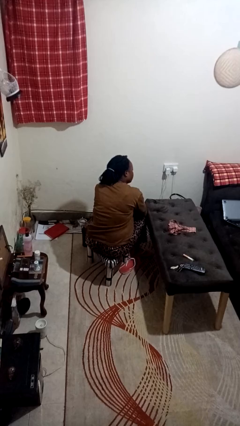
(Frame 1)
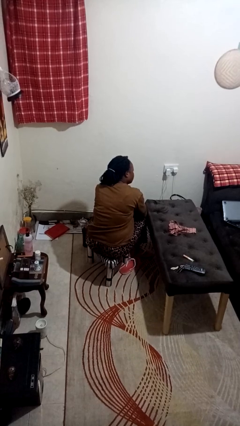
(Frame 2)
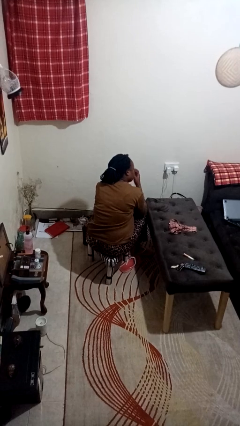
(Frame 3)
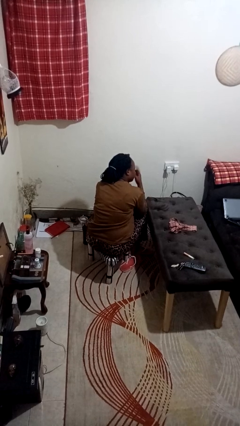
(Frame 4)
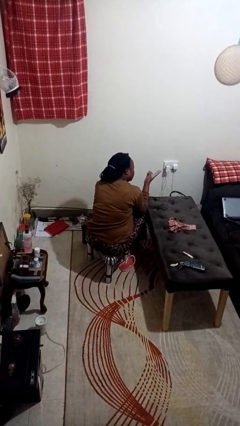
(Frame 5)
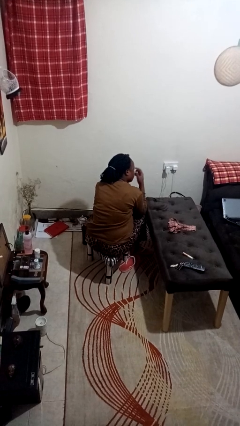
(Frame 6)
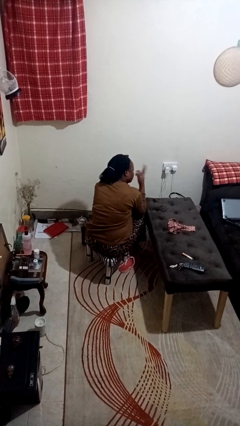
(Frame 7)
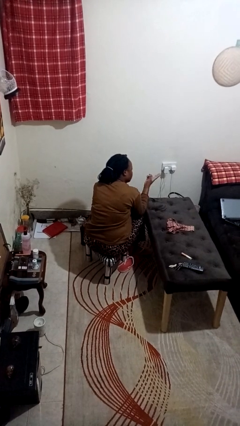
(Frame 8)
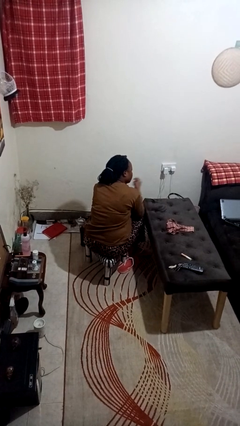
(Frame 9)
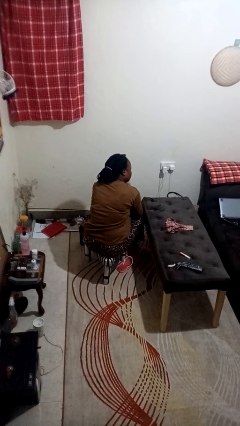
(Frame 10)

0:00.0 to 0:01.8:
person gestures watch closely

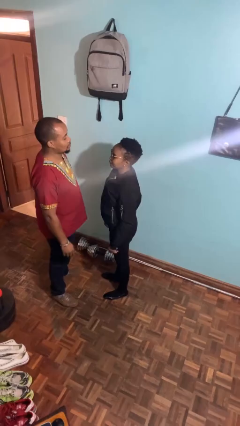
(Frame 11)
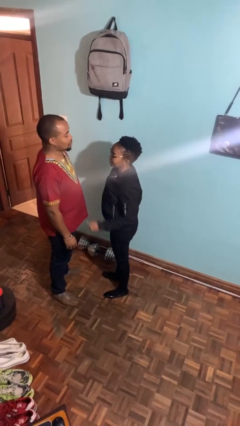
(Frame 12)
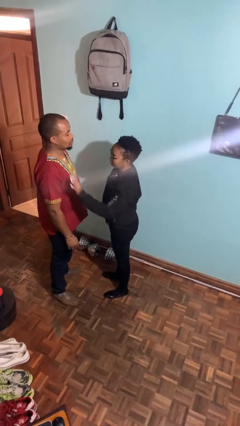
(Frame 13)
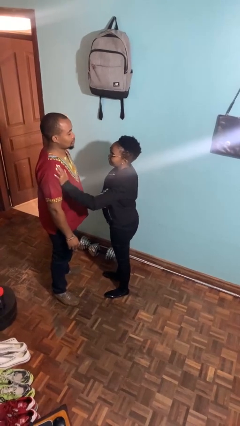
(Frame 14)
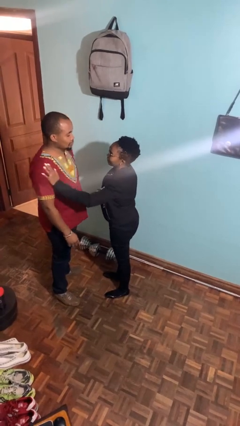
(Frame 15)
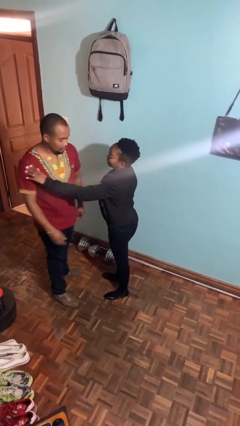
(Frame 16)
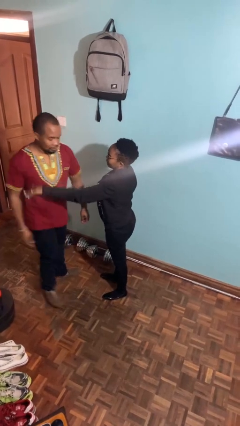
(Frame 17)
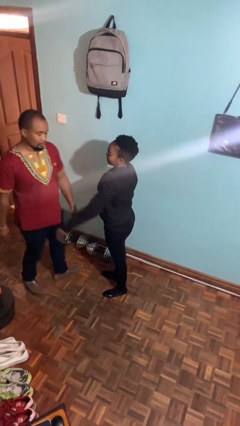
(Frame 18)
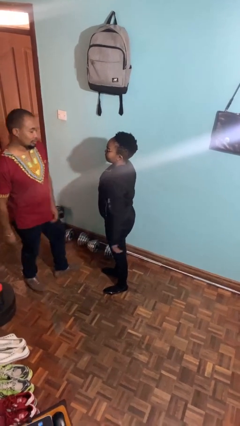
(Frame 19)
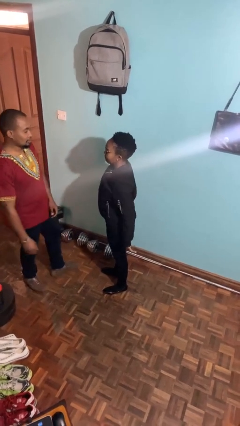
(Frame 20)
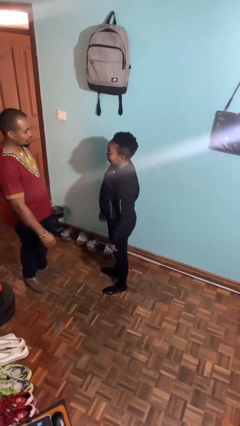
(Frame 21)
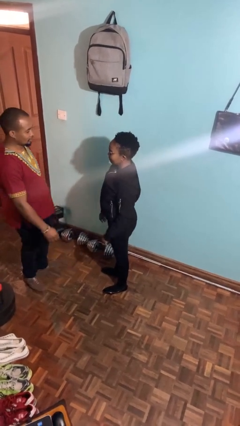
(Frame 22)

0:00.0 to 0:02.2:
person shoves person

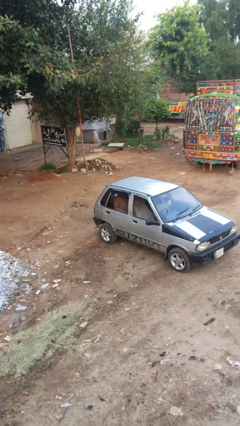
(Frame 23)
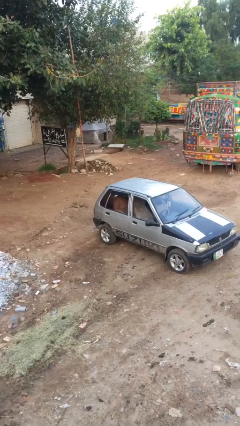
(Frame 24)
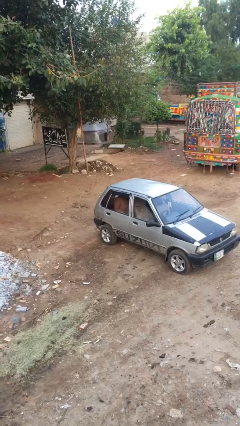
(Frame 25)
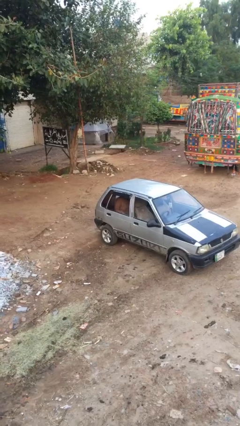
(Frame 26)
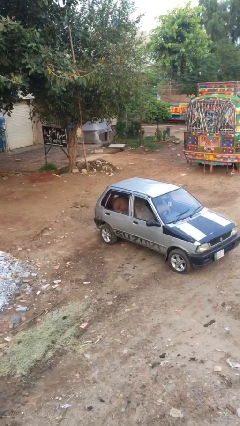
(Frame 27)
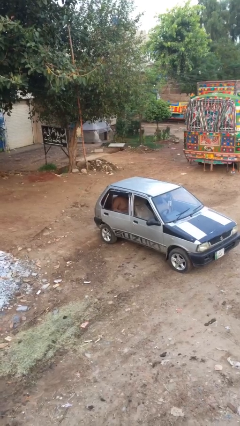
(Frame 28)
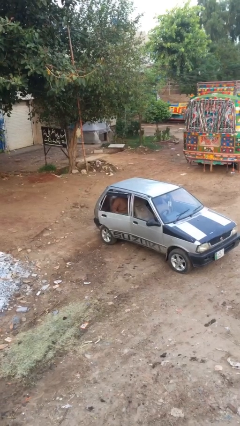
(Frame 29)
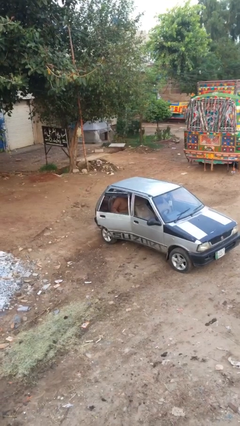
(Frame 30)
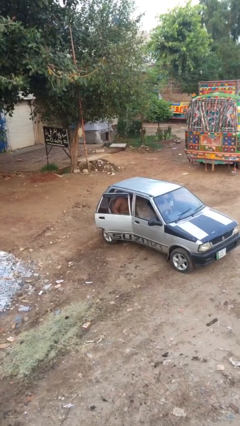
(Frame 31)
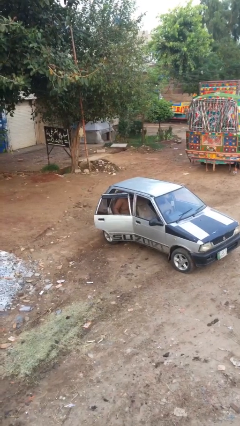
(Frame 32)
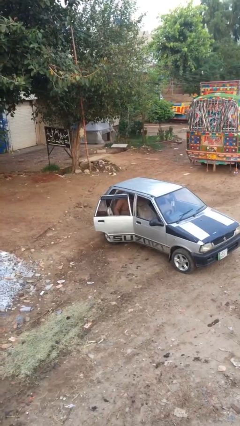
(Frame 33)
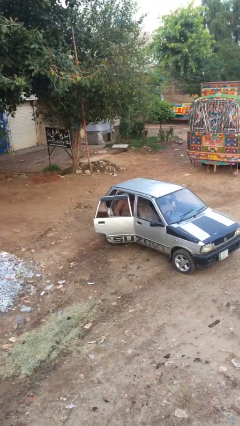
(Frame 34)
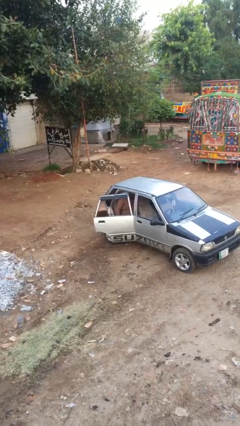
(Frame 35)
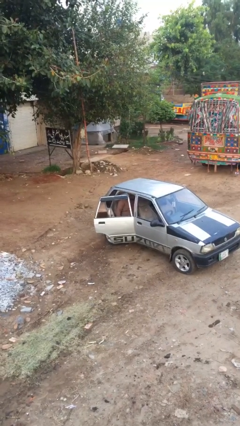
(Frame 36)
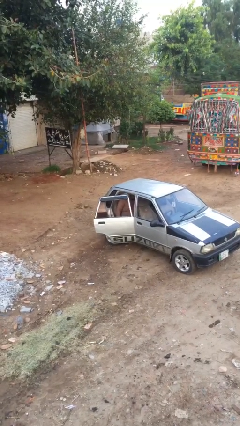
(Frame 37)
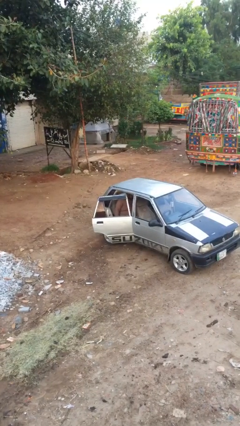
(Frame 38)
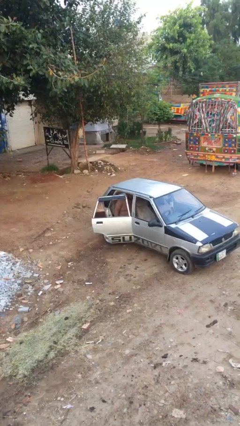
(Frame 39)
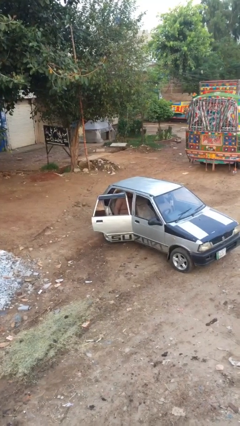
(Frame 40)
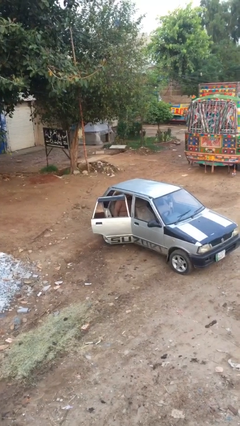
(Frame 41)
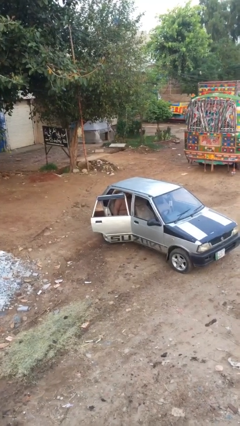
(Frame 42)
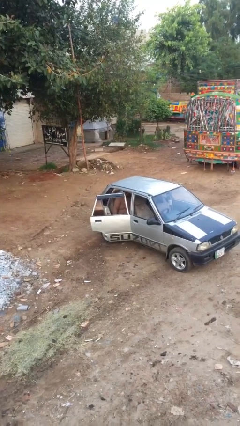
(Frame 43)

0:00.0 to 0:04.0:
person opens car door

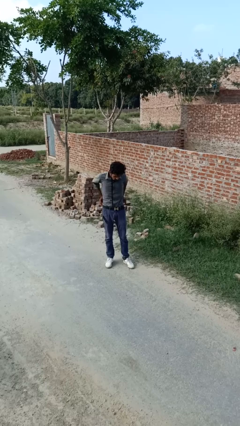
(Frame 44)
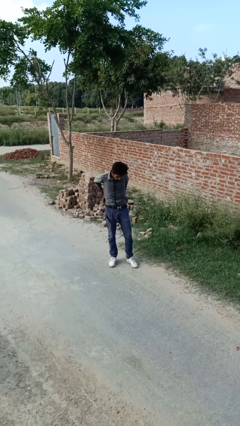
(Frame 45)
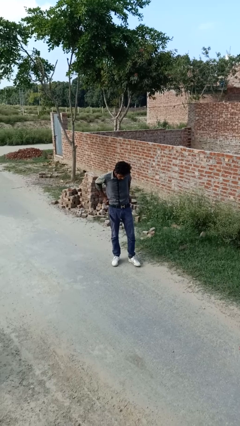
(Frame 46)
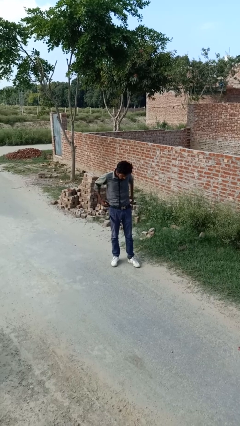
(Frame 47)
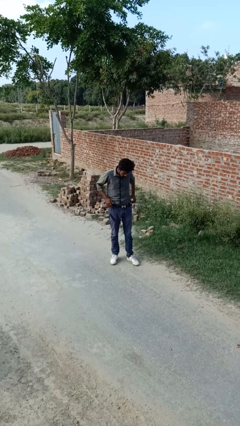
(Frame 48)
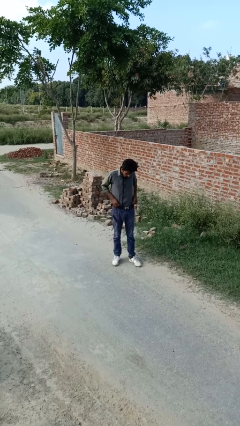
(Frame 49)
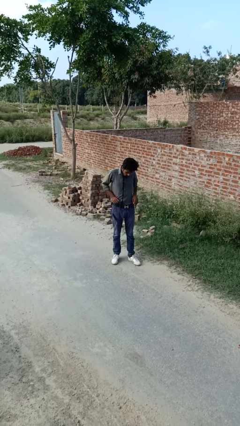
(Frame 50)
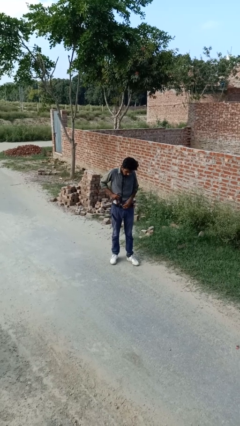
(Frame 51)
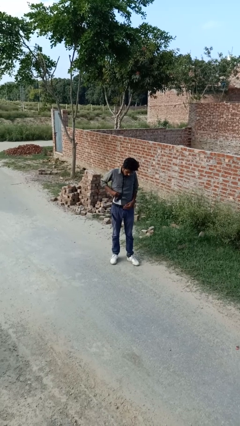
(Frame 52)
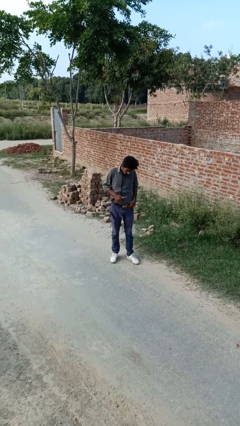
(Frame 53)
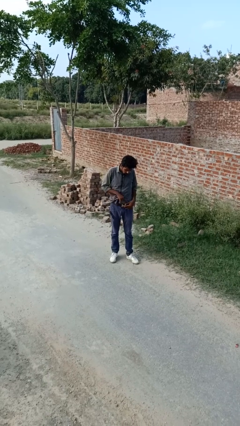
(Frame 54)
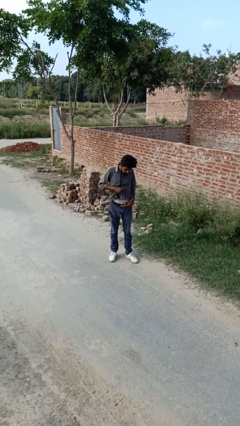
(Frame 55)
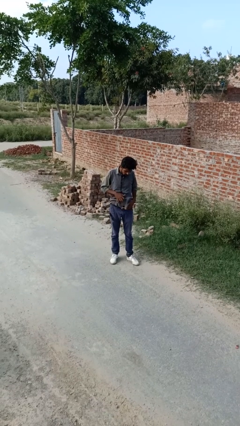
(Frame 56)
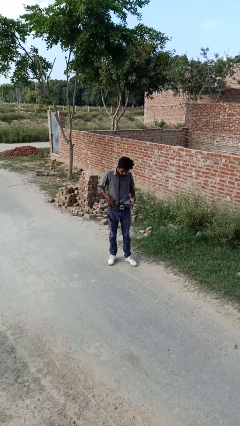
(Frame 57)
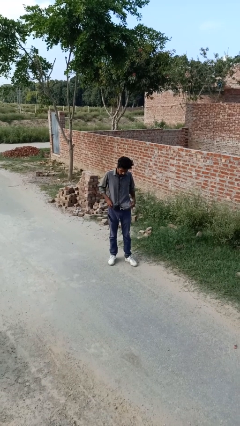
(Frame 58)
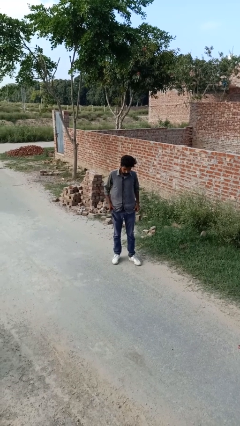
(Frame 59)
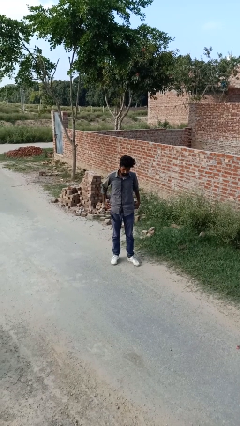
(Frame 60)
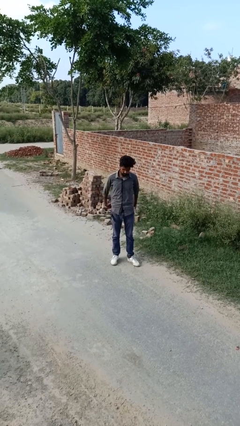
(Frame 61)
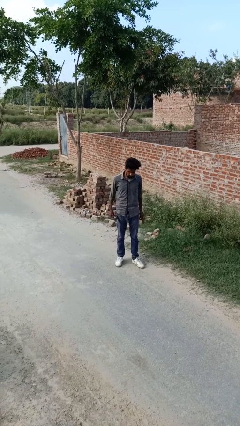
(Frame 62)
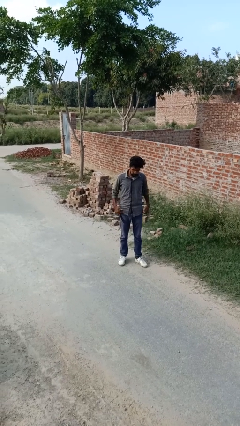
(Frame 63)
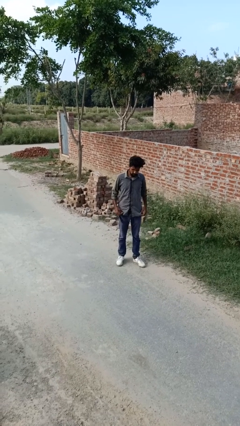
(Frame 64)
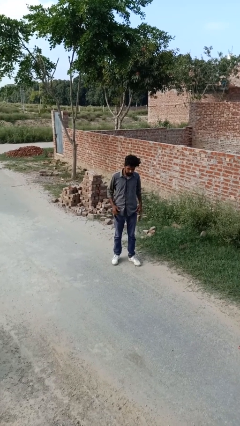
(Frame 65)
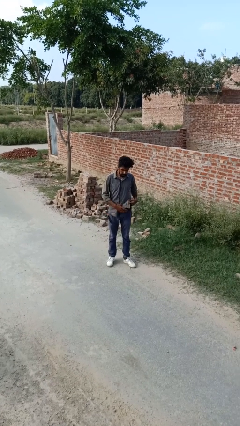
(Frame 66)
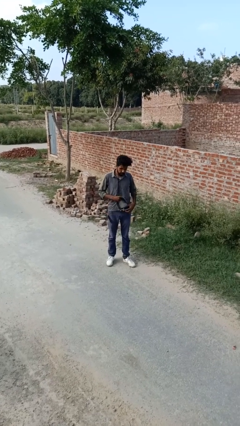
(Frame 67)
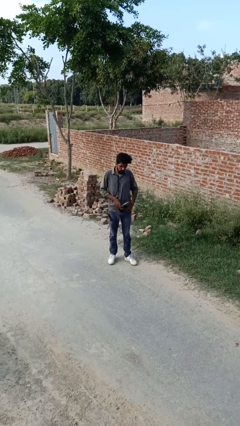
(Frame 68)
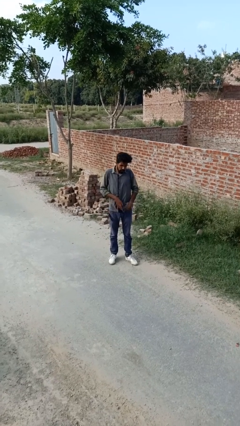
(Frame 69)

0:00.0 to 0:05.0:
person untucks shirt

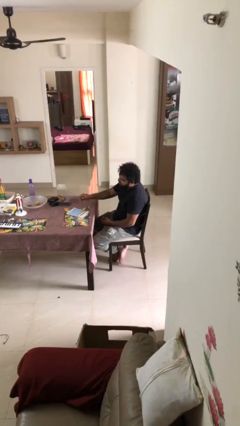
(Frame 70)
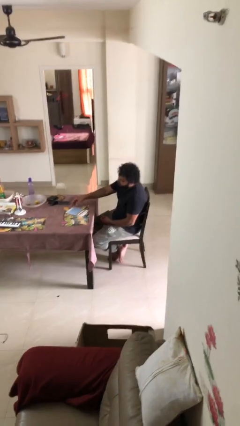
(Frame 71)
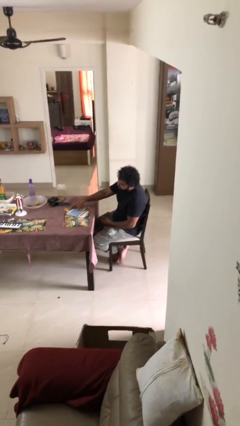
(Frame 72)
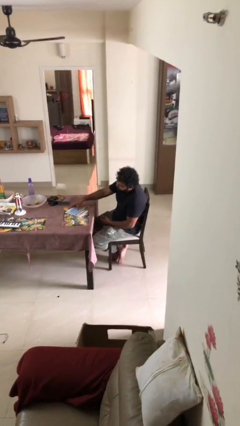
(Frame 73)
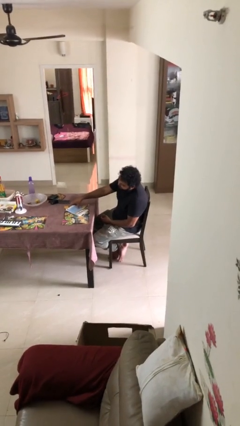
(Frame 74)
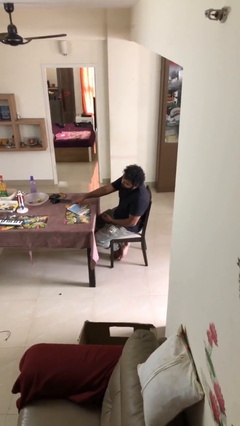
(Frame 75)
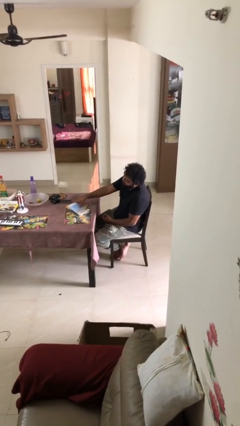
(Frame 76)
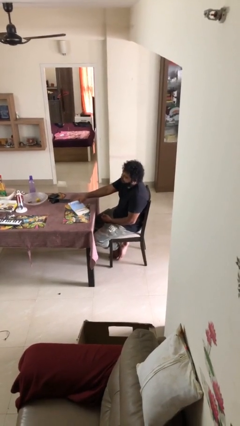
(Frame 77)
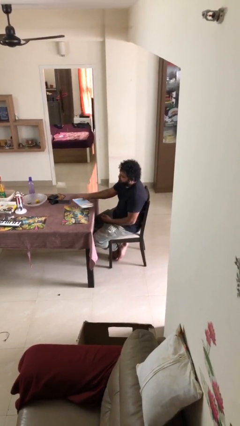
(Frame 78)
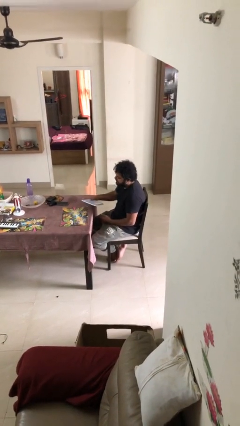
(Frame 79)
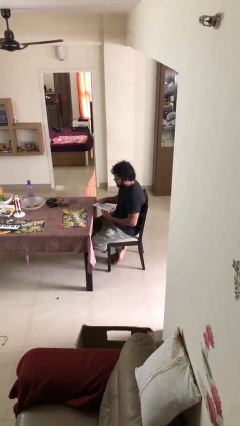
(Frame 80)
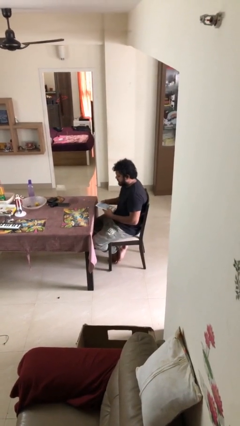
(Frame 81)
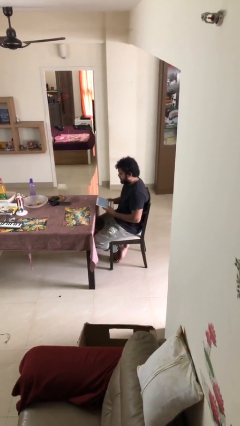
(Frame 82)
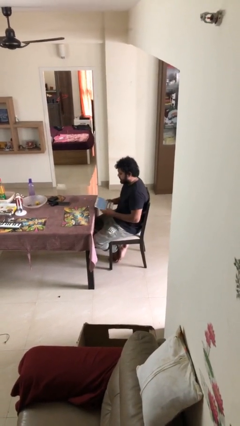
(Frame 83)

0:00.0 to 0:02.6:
person picks up object from table

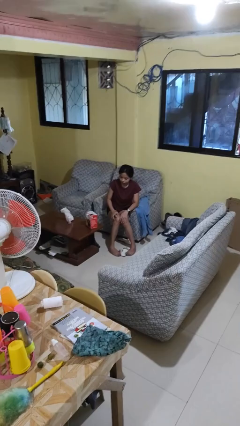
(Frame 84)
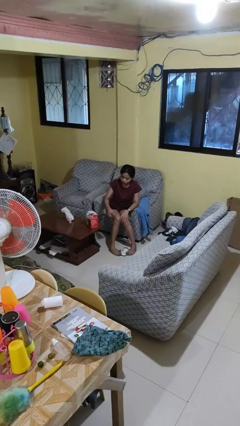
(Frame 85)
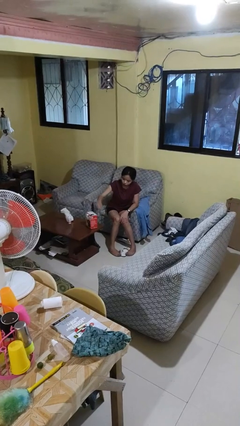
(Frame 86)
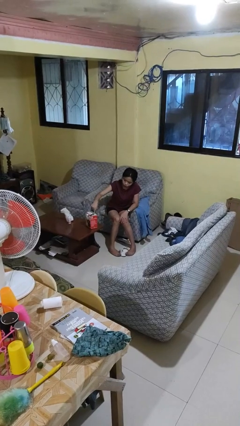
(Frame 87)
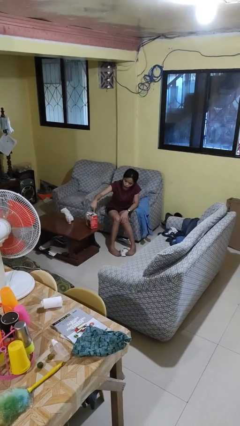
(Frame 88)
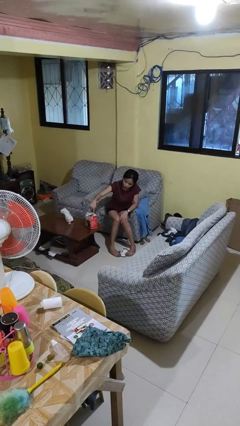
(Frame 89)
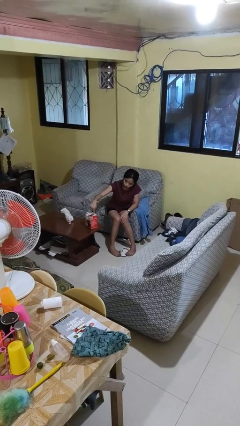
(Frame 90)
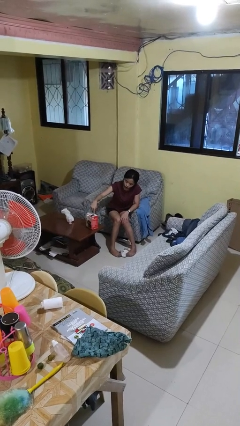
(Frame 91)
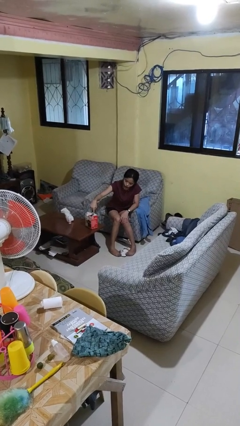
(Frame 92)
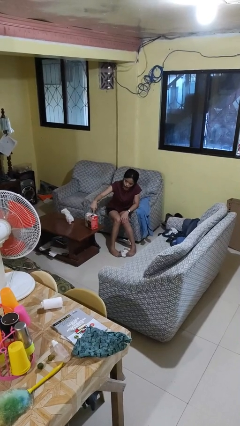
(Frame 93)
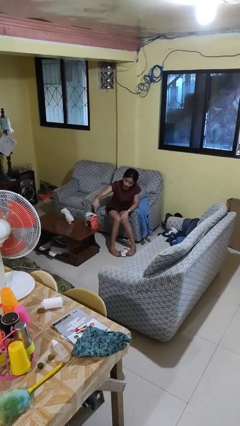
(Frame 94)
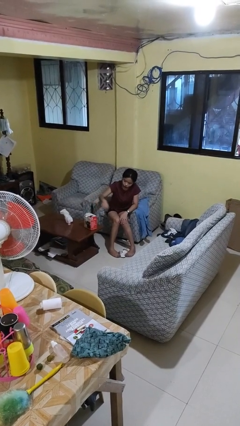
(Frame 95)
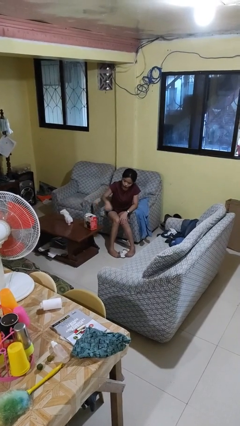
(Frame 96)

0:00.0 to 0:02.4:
person taps object with finger
